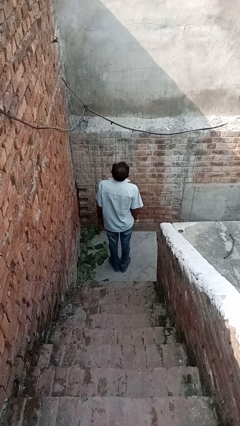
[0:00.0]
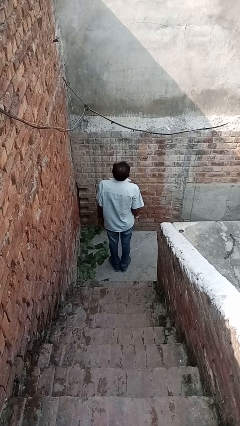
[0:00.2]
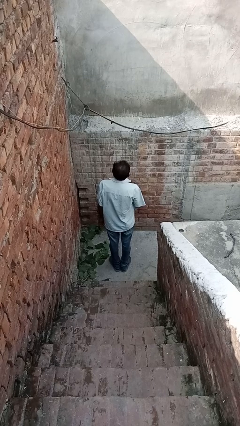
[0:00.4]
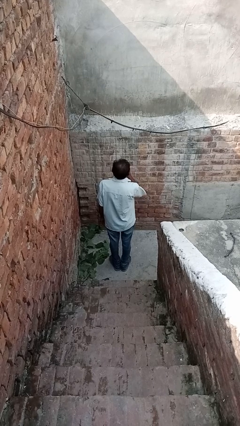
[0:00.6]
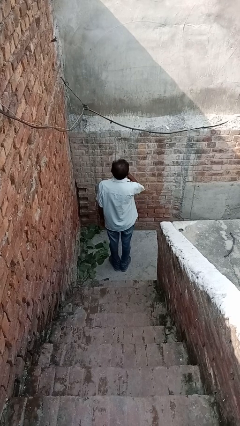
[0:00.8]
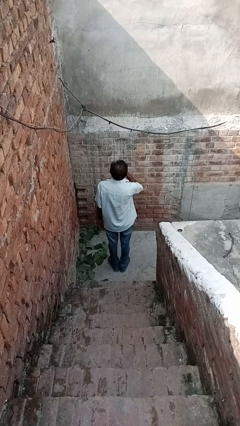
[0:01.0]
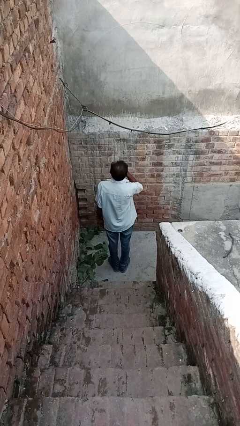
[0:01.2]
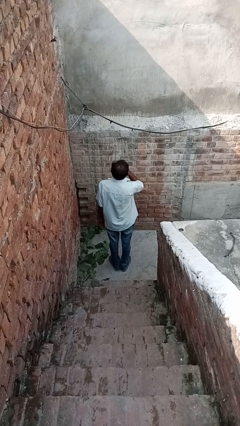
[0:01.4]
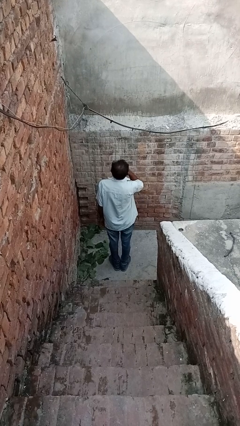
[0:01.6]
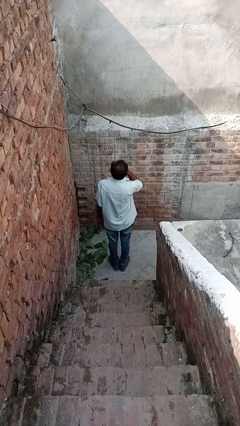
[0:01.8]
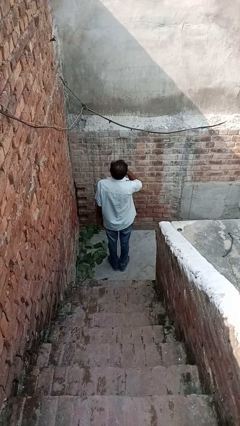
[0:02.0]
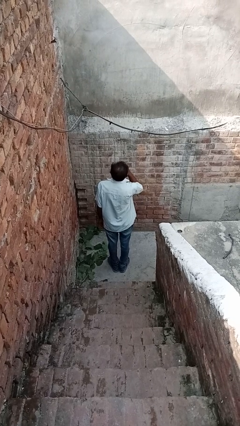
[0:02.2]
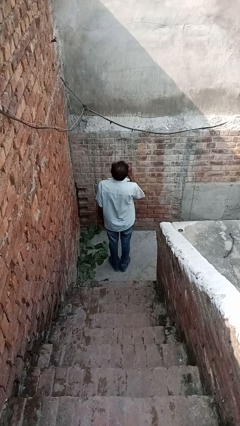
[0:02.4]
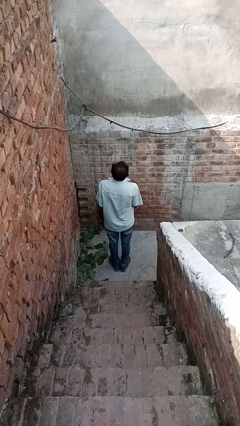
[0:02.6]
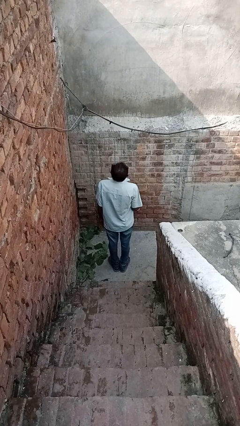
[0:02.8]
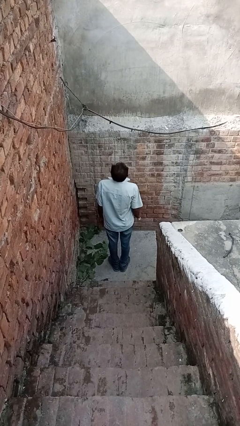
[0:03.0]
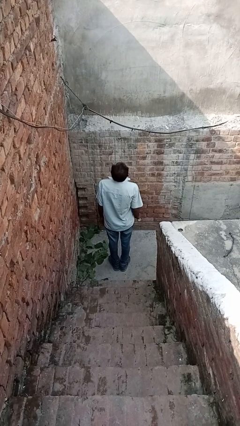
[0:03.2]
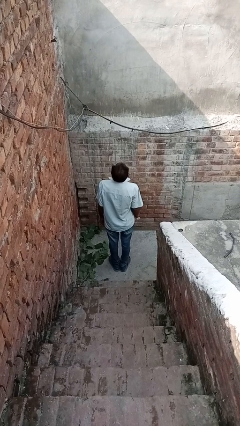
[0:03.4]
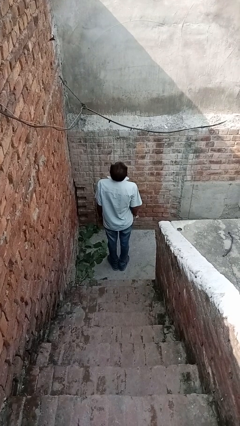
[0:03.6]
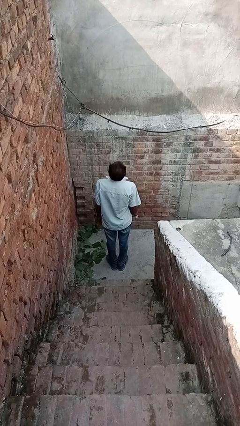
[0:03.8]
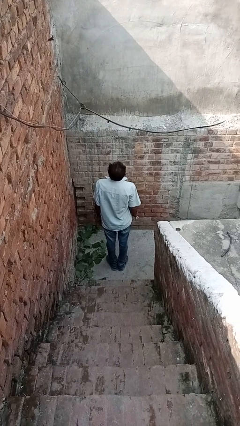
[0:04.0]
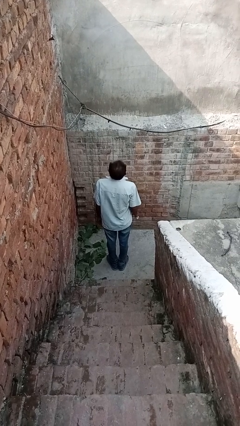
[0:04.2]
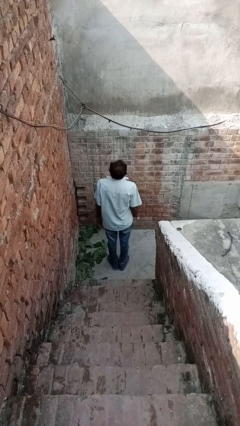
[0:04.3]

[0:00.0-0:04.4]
person vapes

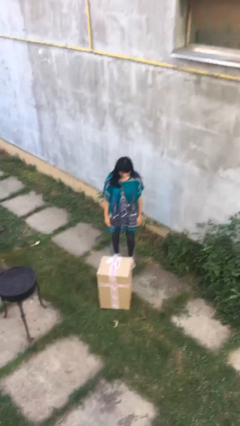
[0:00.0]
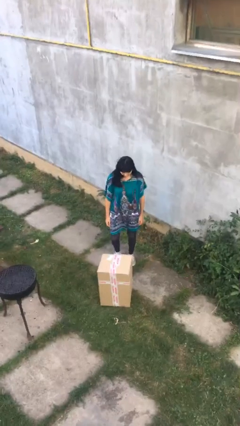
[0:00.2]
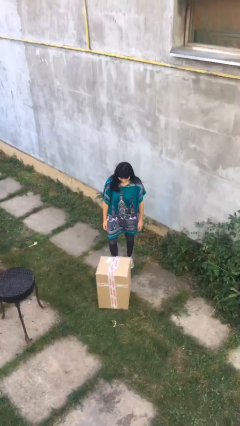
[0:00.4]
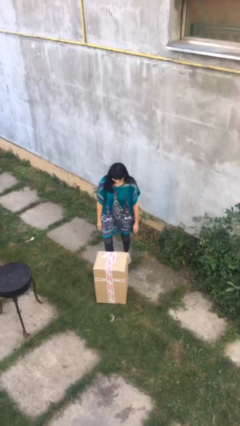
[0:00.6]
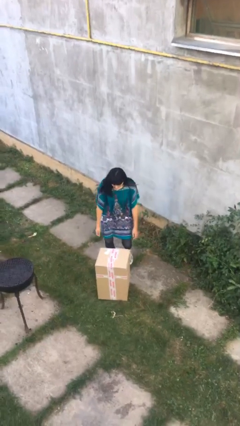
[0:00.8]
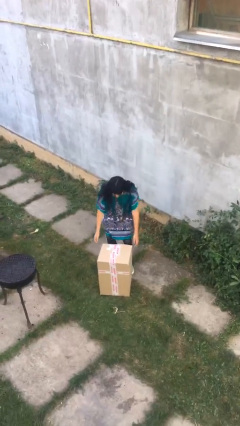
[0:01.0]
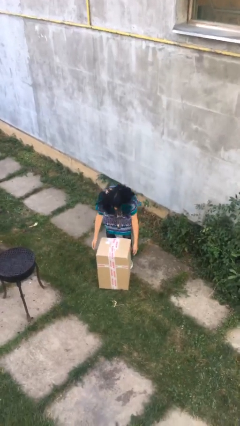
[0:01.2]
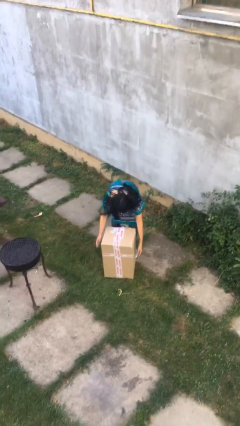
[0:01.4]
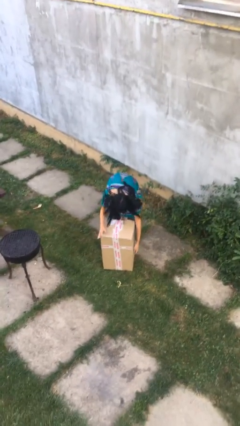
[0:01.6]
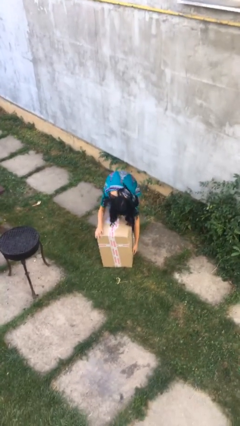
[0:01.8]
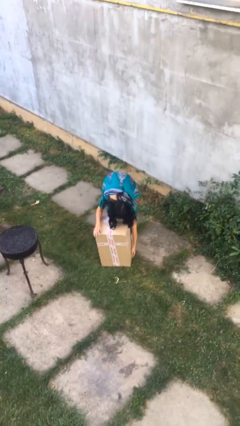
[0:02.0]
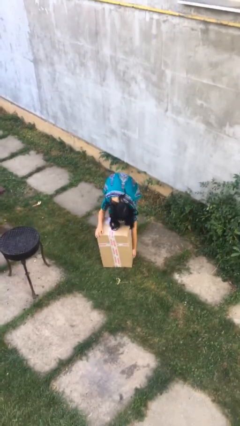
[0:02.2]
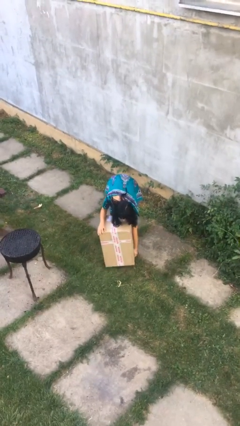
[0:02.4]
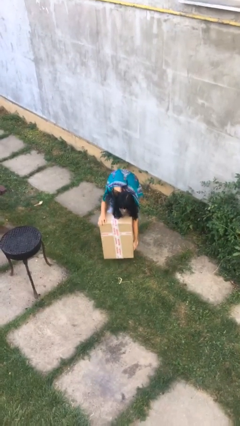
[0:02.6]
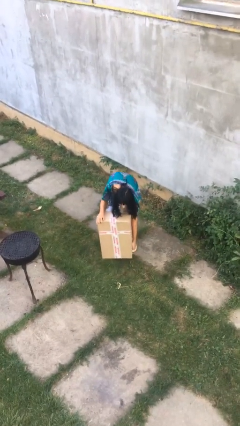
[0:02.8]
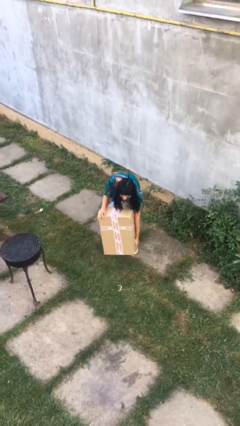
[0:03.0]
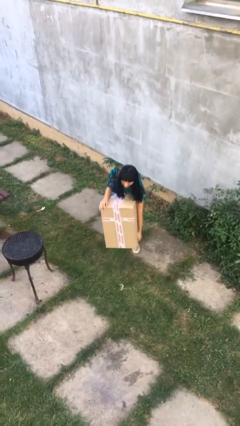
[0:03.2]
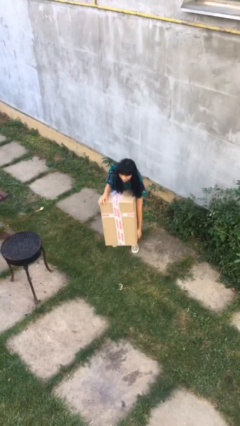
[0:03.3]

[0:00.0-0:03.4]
person picks up object from floor

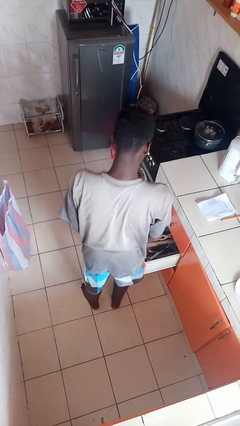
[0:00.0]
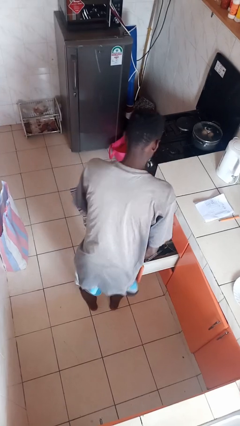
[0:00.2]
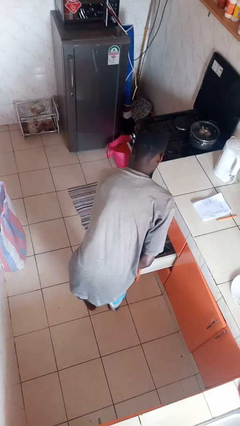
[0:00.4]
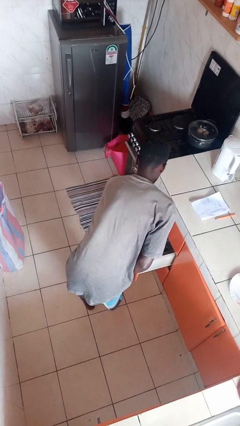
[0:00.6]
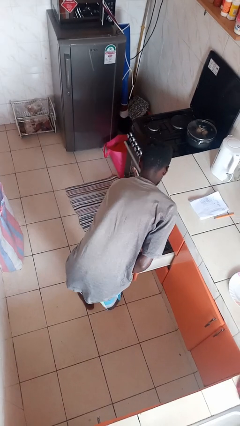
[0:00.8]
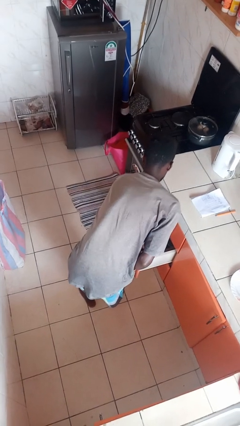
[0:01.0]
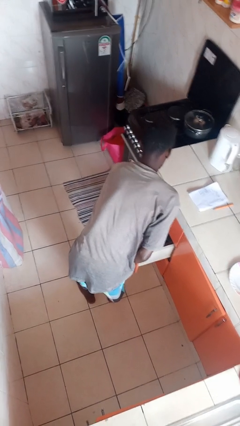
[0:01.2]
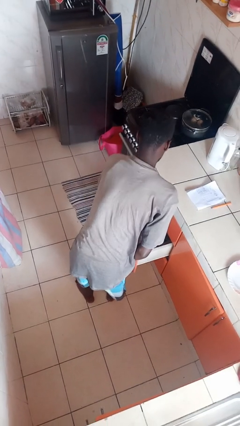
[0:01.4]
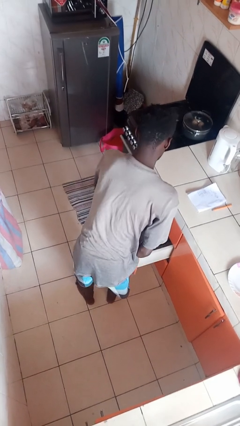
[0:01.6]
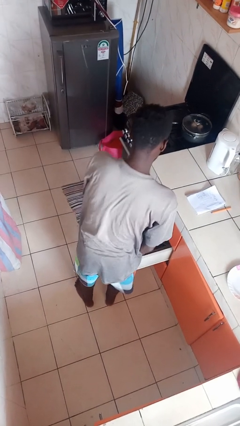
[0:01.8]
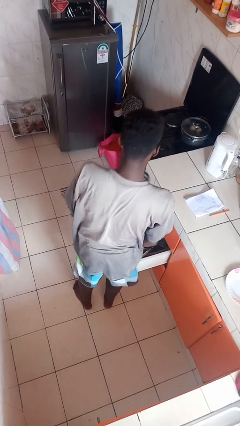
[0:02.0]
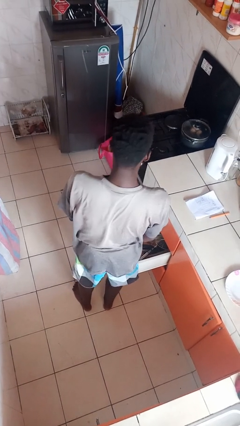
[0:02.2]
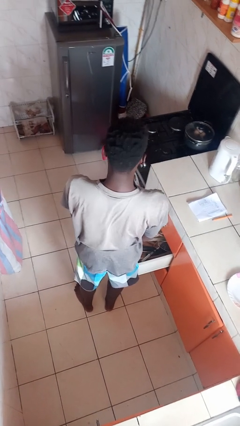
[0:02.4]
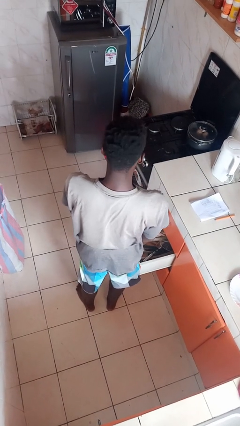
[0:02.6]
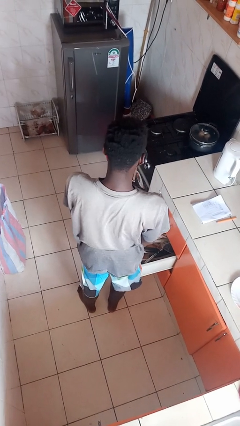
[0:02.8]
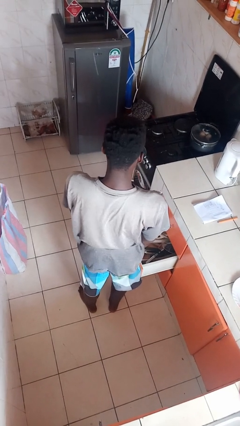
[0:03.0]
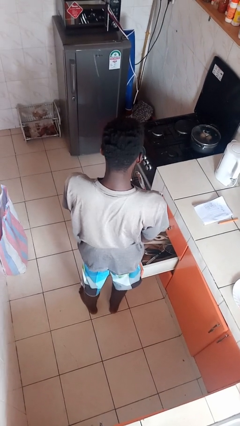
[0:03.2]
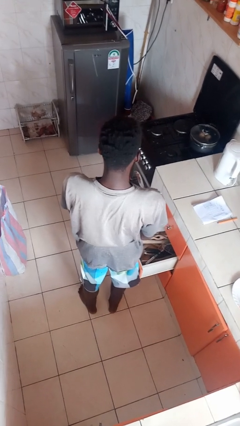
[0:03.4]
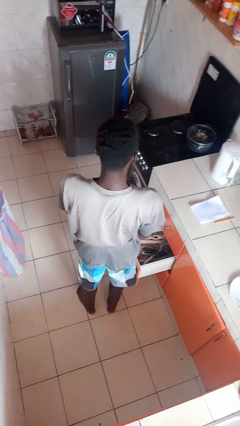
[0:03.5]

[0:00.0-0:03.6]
person takes object from kitchen drawer

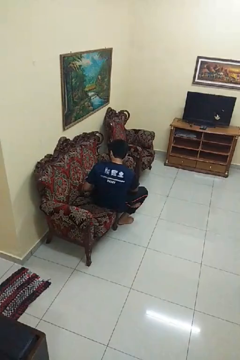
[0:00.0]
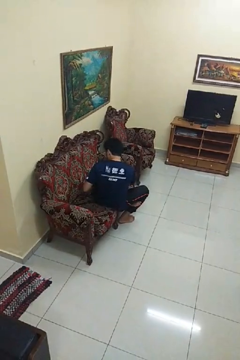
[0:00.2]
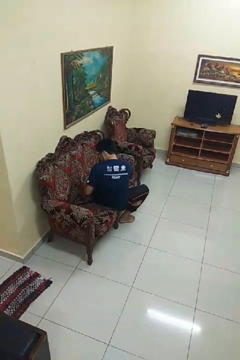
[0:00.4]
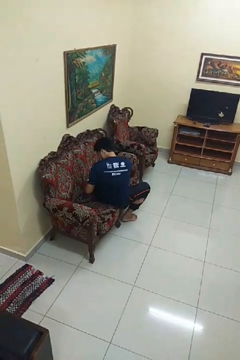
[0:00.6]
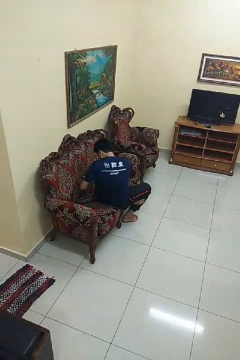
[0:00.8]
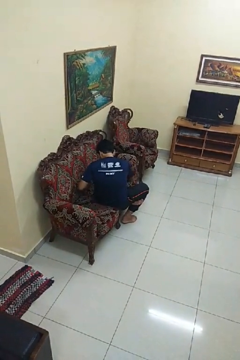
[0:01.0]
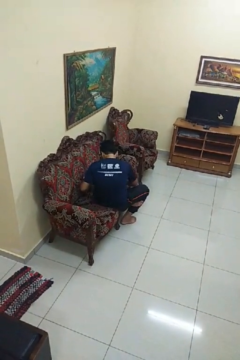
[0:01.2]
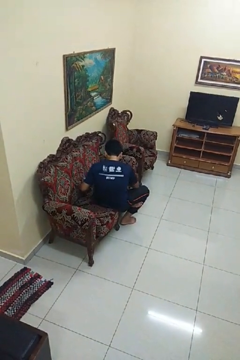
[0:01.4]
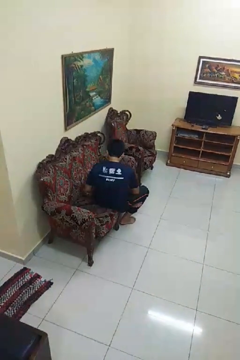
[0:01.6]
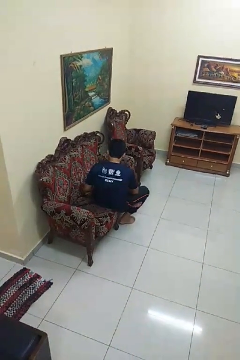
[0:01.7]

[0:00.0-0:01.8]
person searches in couch

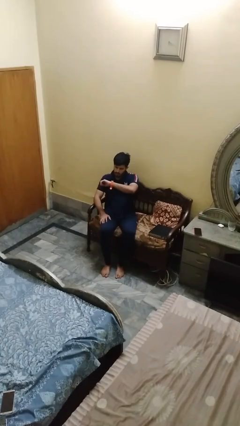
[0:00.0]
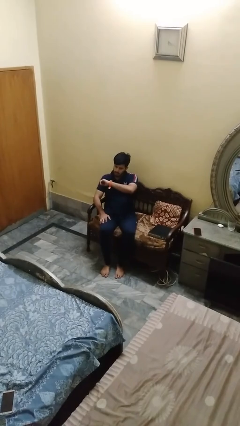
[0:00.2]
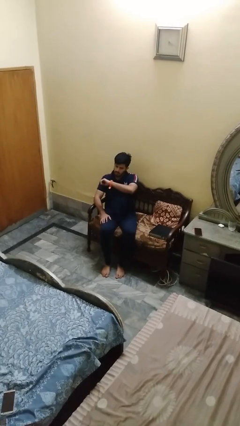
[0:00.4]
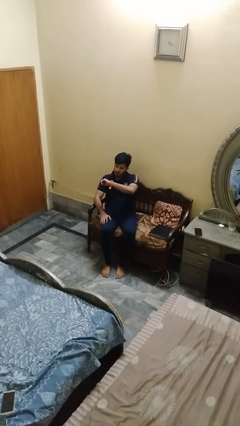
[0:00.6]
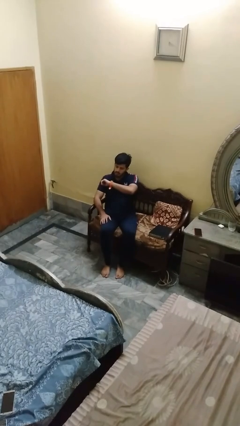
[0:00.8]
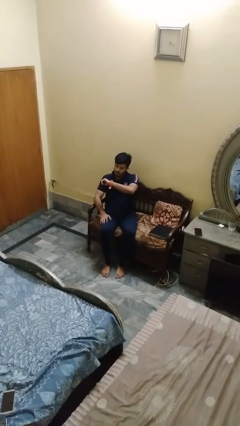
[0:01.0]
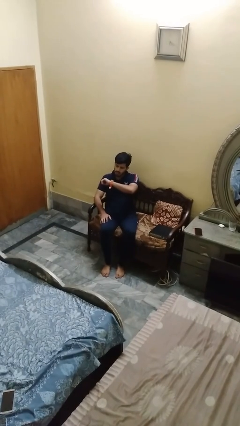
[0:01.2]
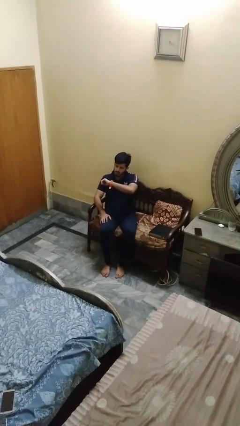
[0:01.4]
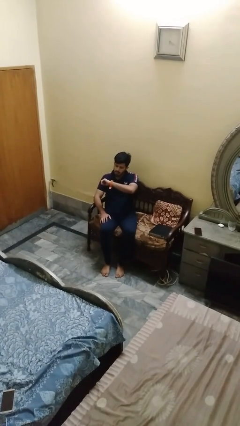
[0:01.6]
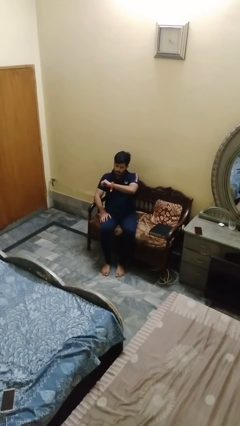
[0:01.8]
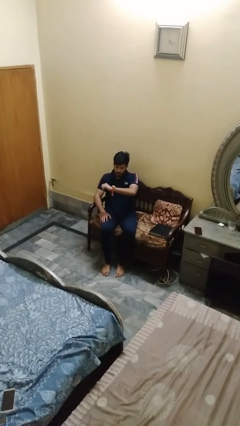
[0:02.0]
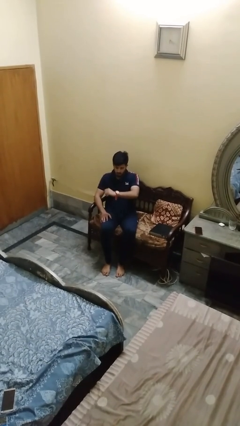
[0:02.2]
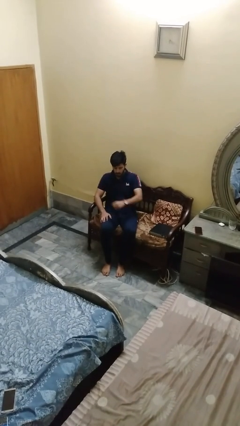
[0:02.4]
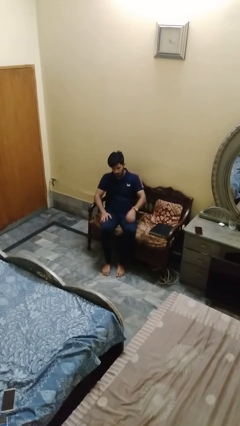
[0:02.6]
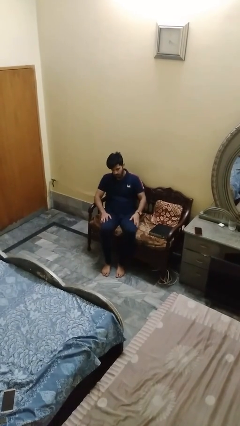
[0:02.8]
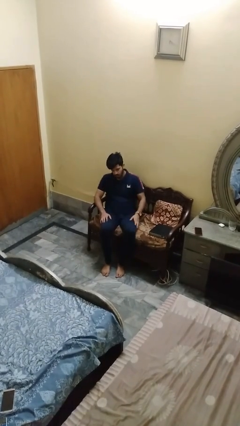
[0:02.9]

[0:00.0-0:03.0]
person looks at wristwatch

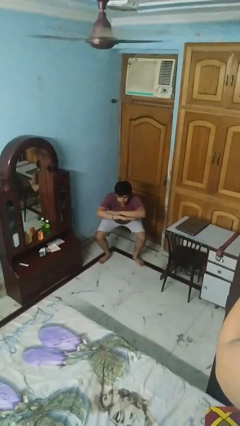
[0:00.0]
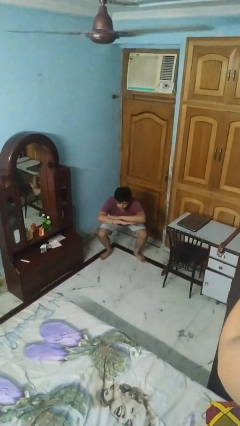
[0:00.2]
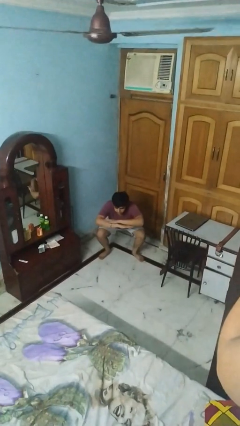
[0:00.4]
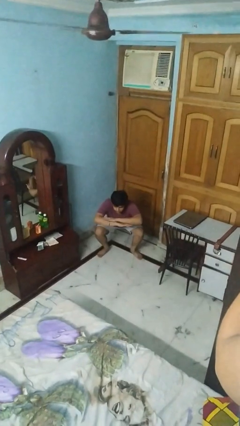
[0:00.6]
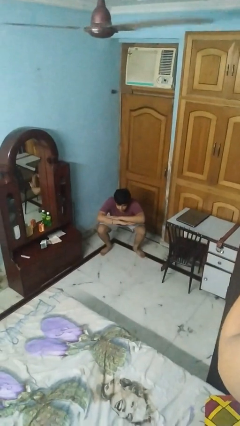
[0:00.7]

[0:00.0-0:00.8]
person squats
